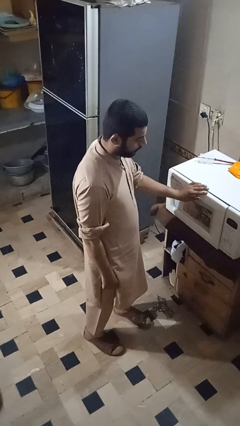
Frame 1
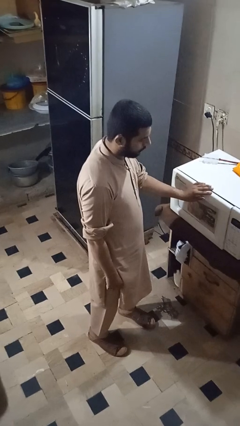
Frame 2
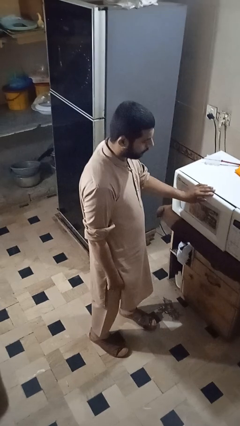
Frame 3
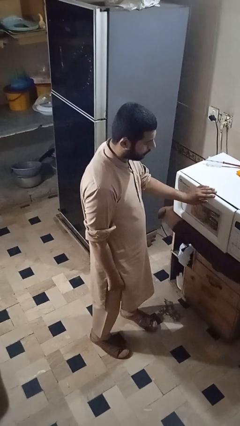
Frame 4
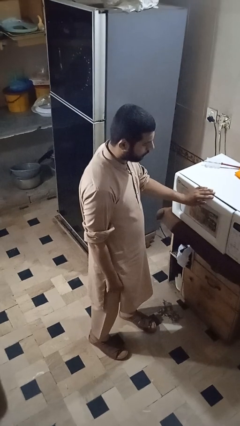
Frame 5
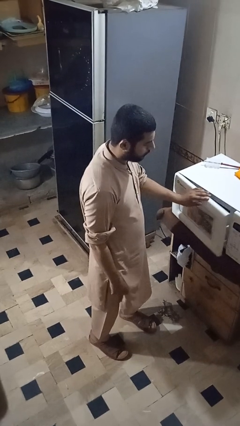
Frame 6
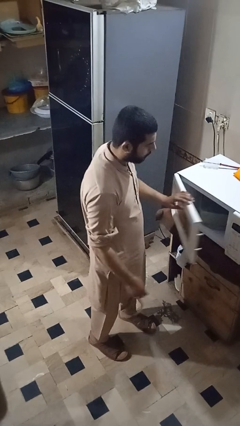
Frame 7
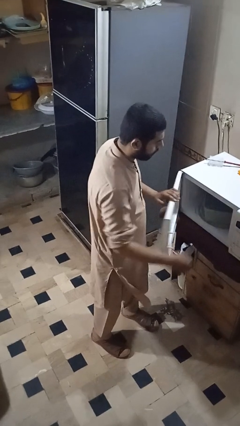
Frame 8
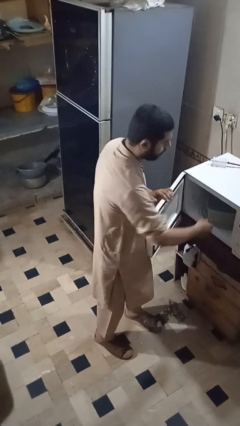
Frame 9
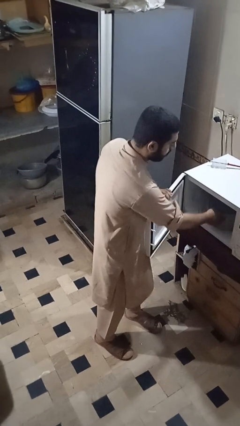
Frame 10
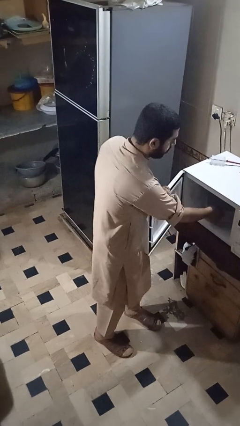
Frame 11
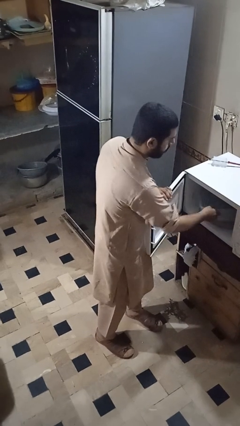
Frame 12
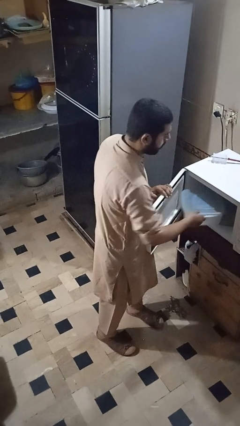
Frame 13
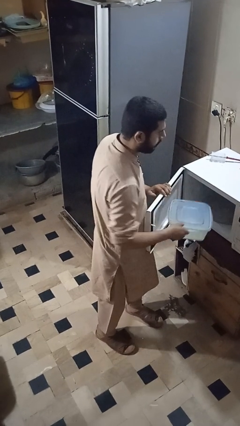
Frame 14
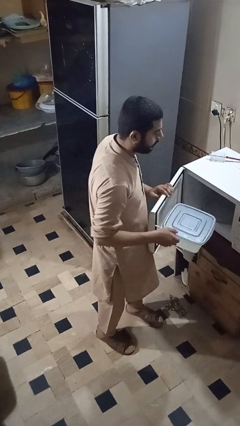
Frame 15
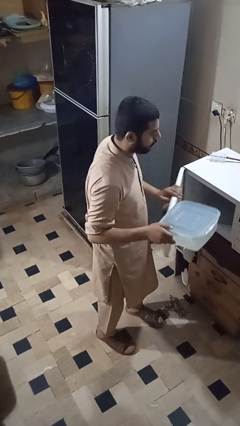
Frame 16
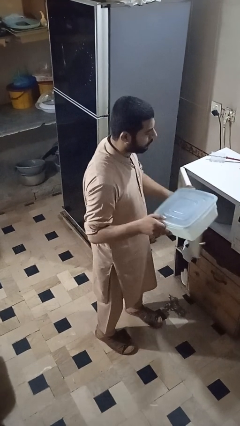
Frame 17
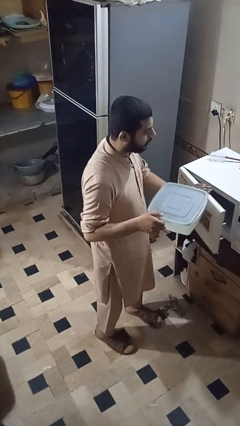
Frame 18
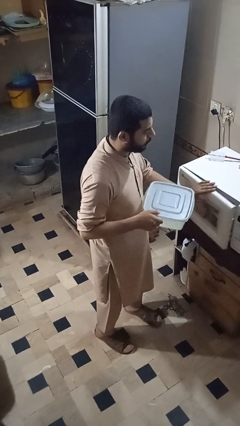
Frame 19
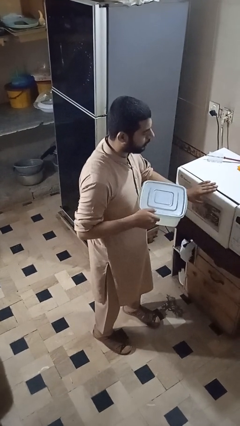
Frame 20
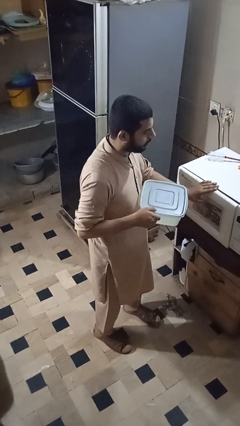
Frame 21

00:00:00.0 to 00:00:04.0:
person takes object from microwave

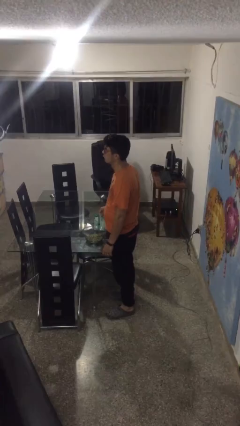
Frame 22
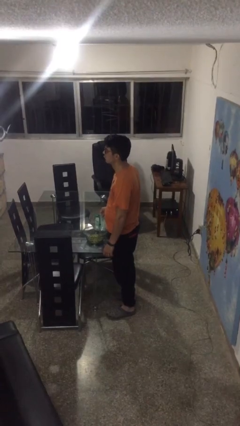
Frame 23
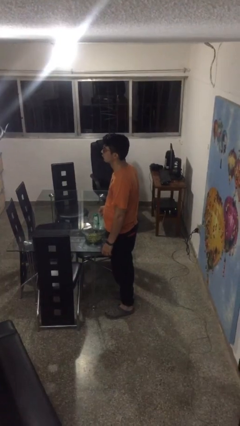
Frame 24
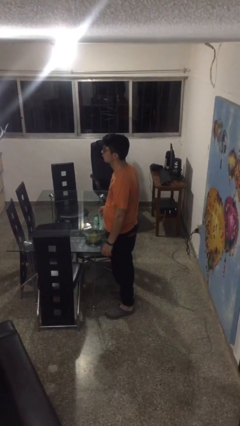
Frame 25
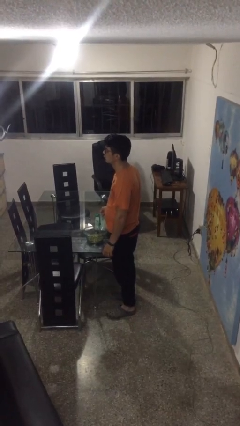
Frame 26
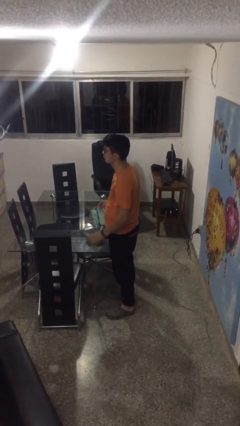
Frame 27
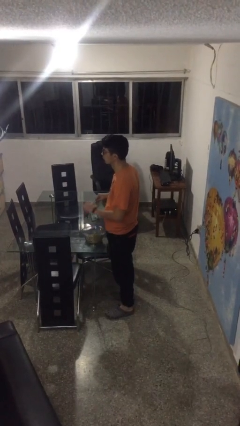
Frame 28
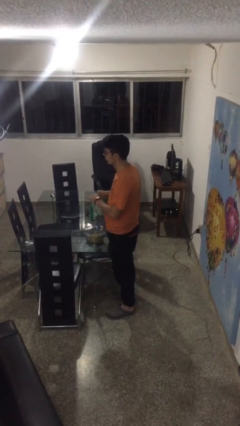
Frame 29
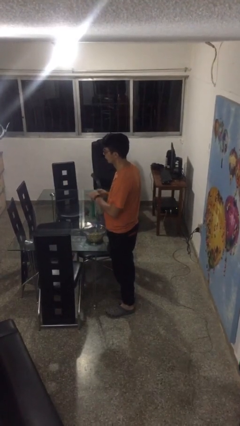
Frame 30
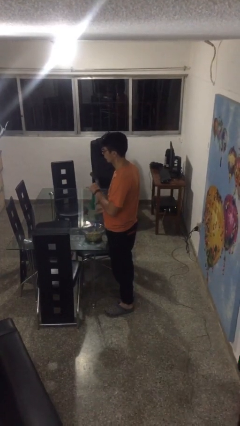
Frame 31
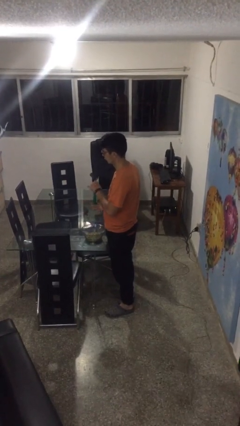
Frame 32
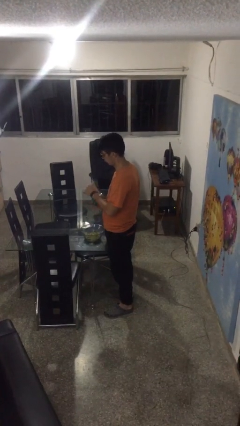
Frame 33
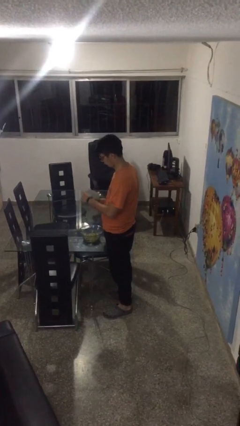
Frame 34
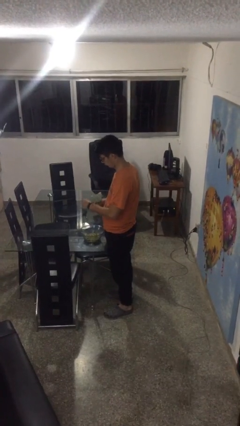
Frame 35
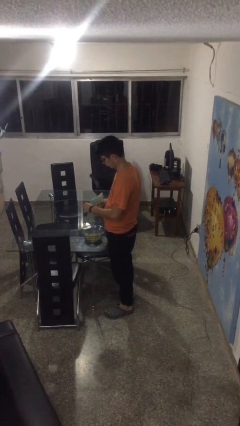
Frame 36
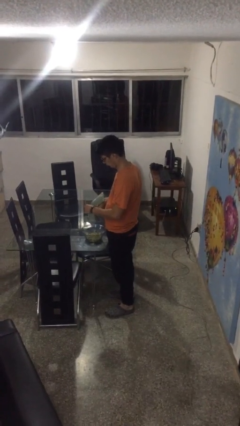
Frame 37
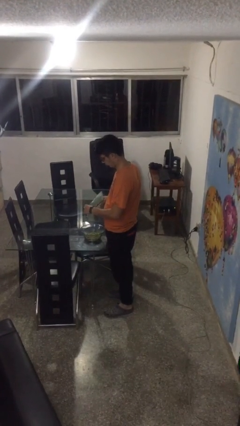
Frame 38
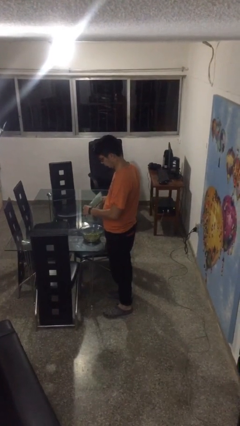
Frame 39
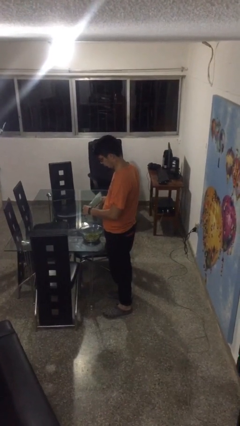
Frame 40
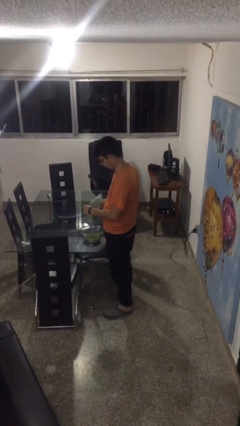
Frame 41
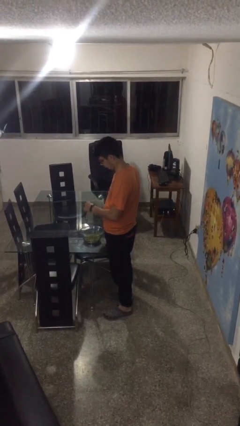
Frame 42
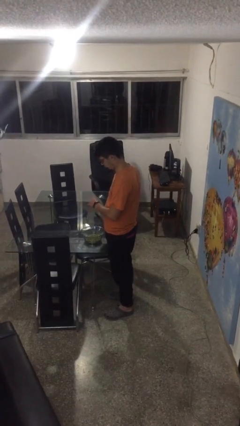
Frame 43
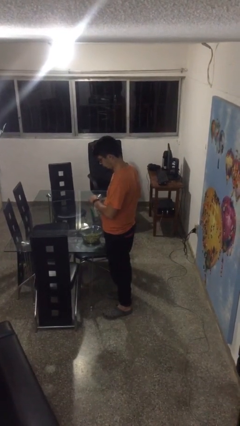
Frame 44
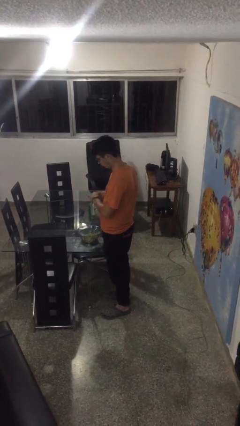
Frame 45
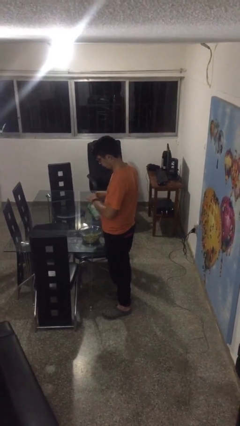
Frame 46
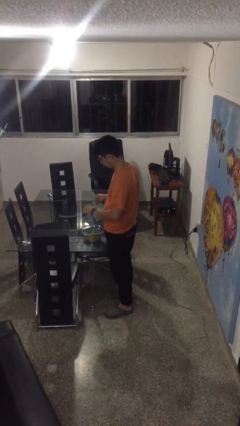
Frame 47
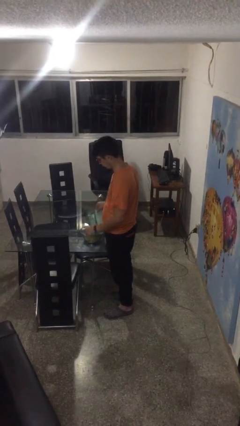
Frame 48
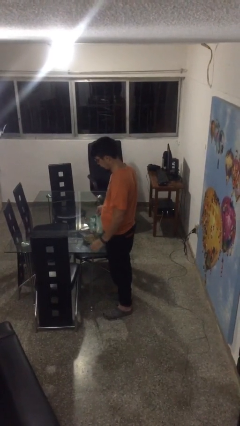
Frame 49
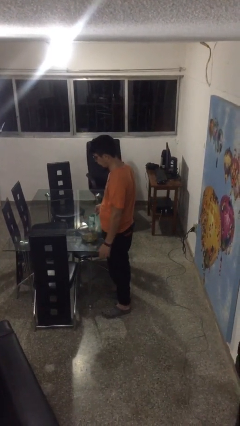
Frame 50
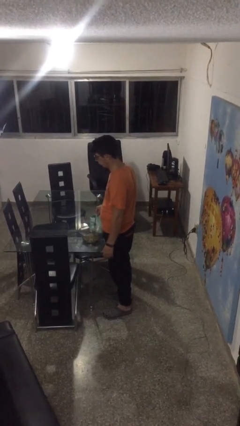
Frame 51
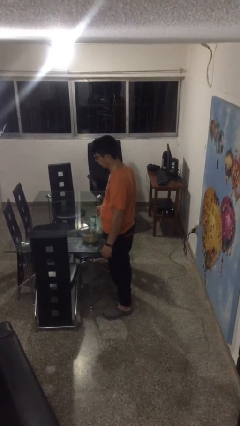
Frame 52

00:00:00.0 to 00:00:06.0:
person pours into bowl

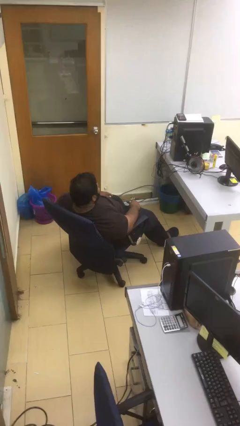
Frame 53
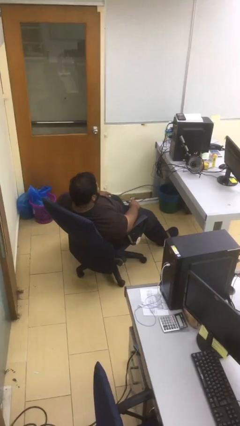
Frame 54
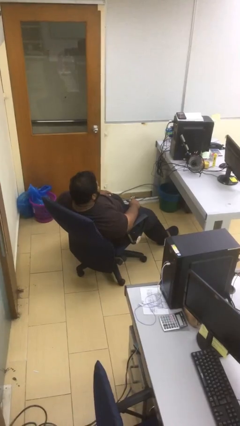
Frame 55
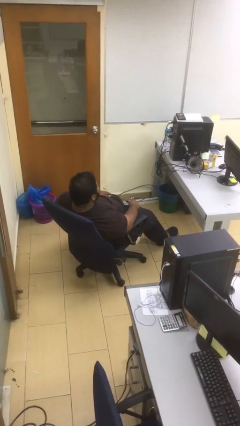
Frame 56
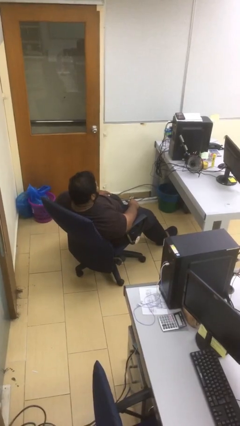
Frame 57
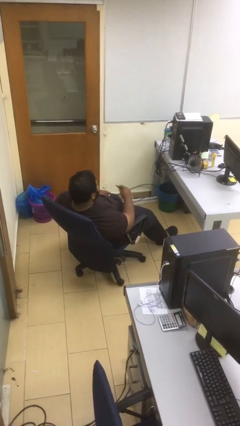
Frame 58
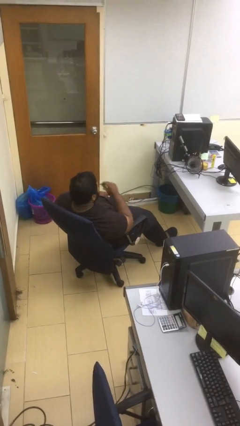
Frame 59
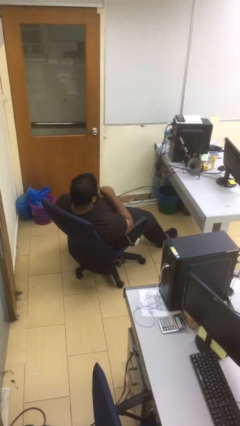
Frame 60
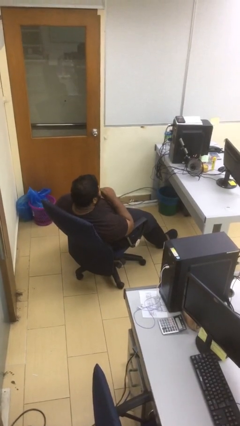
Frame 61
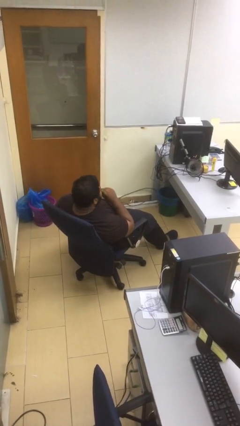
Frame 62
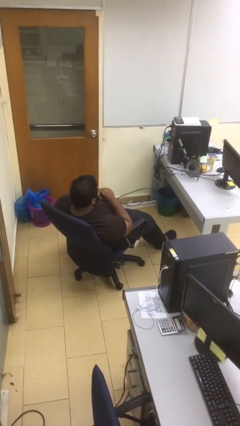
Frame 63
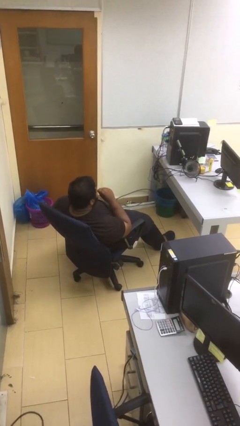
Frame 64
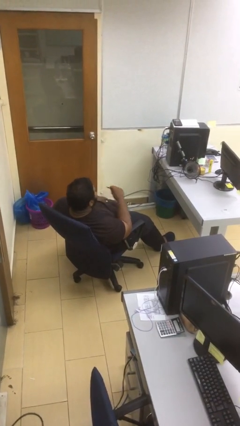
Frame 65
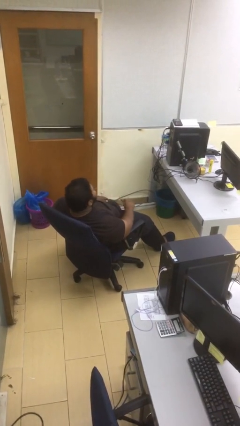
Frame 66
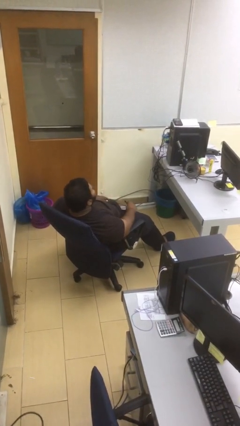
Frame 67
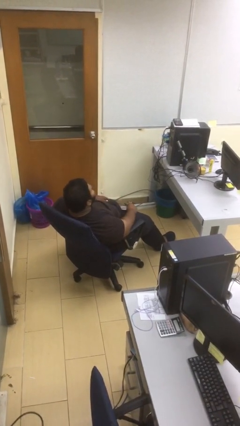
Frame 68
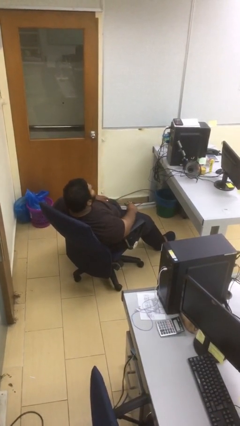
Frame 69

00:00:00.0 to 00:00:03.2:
person vapes

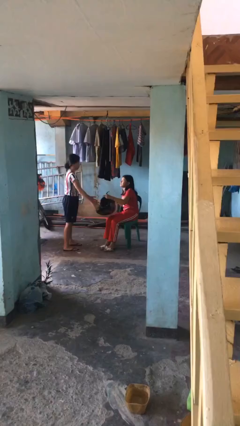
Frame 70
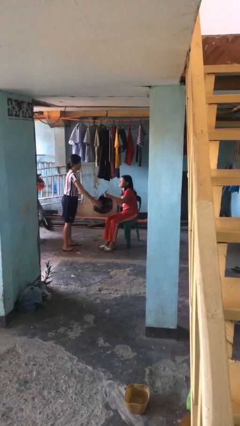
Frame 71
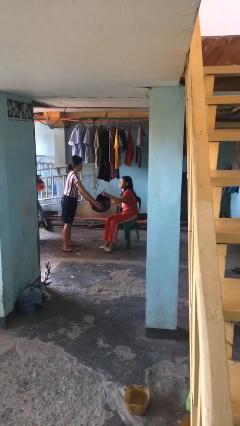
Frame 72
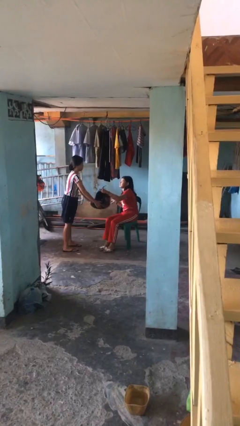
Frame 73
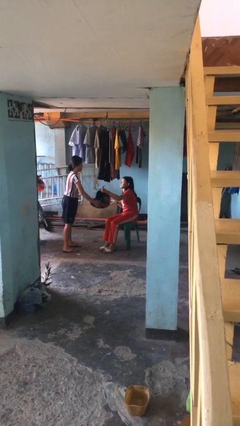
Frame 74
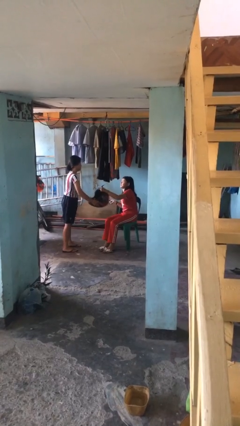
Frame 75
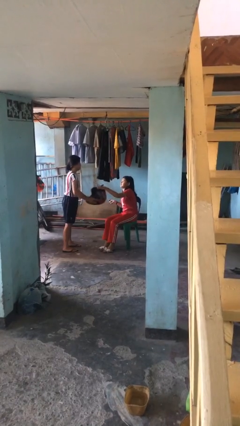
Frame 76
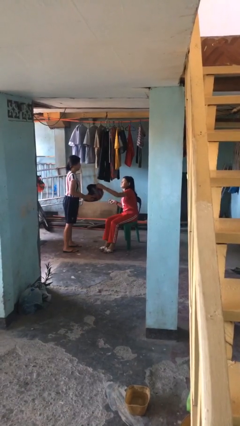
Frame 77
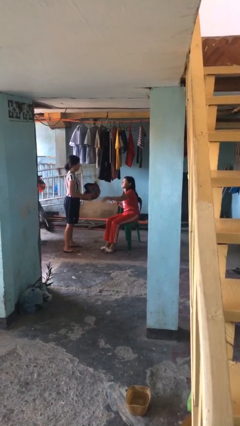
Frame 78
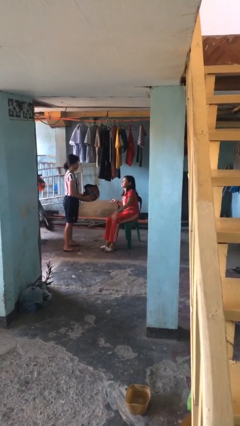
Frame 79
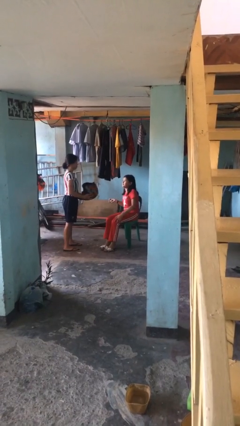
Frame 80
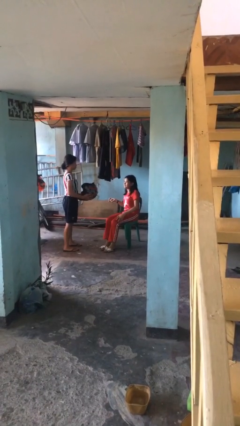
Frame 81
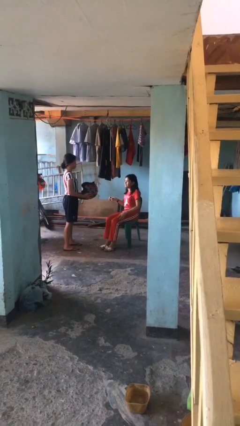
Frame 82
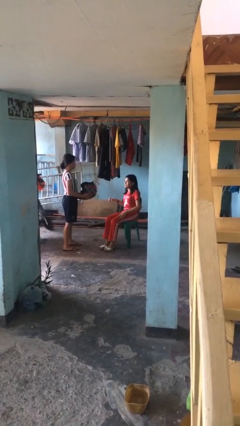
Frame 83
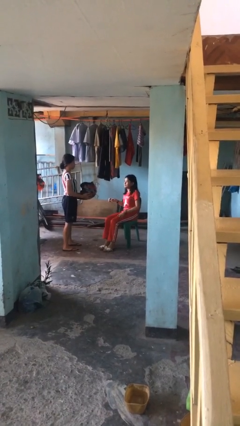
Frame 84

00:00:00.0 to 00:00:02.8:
person transfers object to person

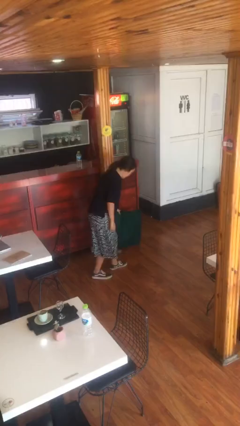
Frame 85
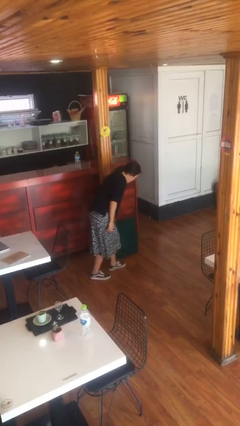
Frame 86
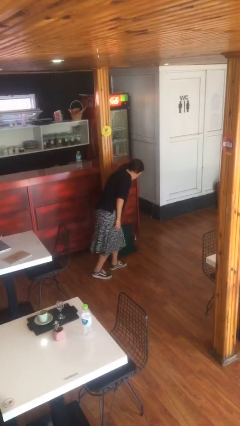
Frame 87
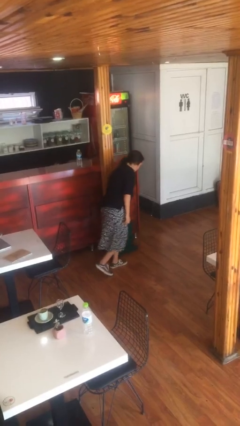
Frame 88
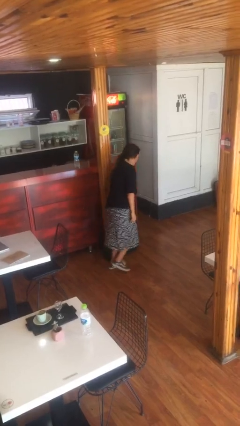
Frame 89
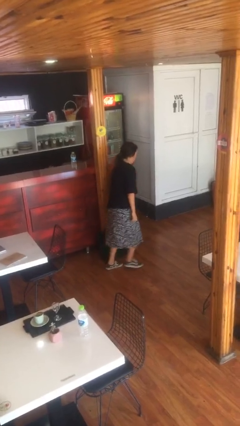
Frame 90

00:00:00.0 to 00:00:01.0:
person puts down object on floor

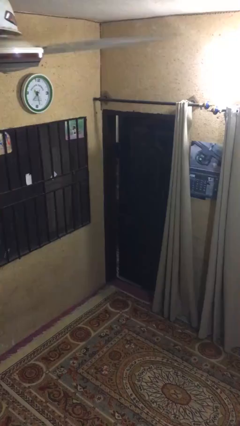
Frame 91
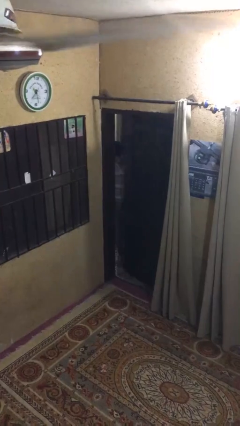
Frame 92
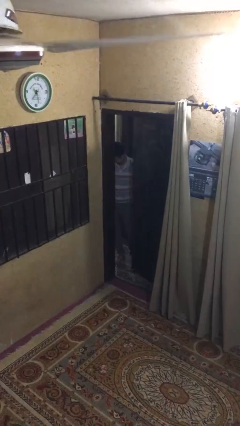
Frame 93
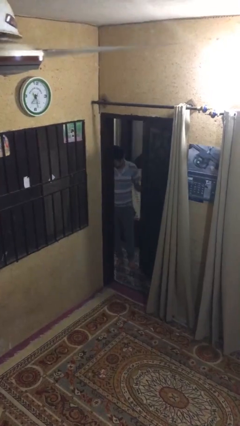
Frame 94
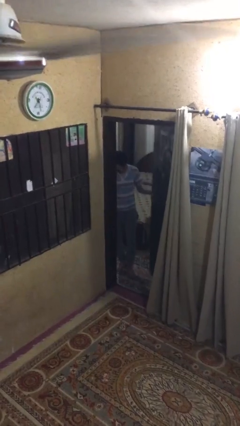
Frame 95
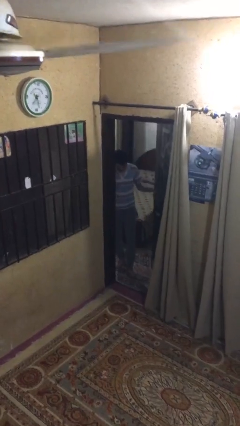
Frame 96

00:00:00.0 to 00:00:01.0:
person opens facility door
